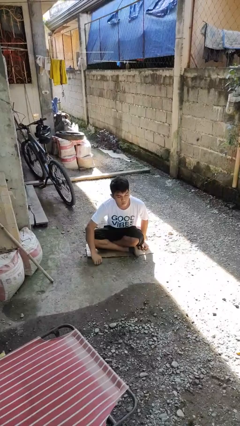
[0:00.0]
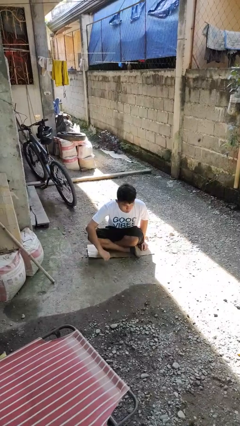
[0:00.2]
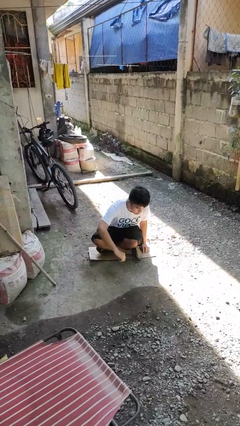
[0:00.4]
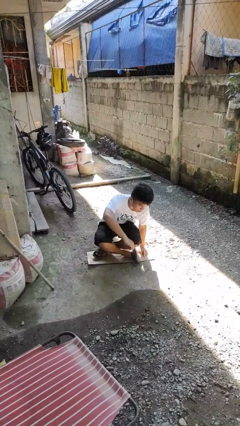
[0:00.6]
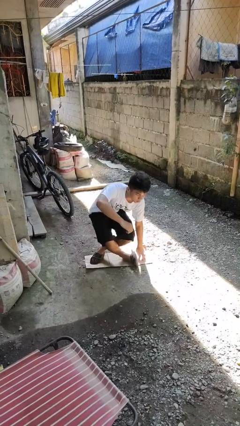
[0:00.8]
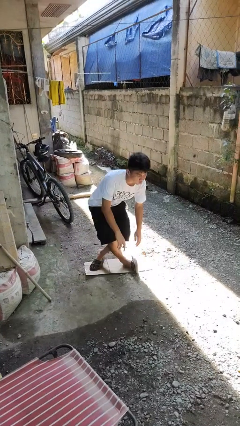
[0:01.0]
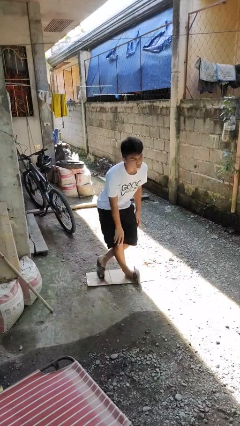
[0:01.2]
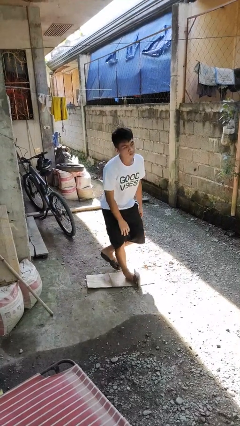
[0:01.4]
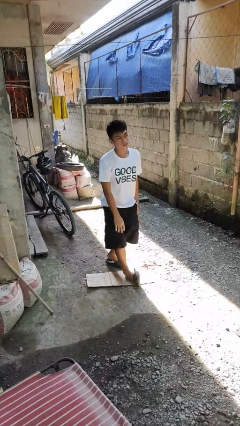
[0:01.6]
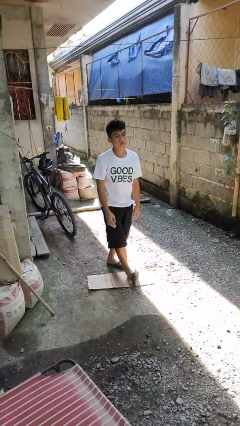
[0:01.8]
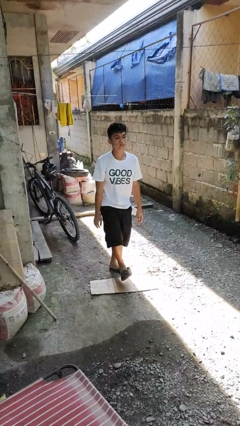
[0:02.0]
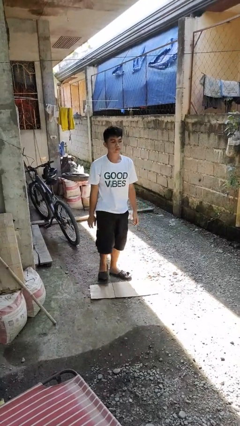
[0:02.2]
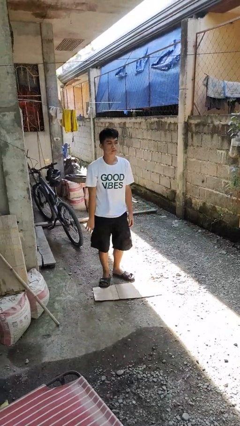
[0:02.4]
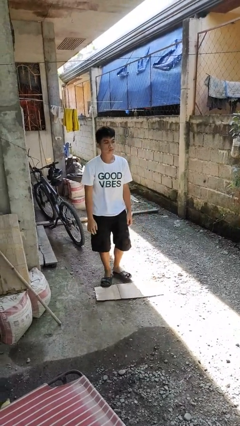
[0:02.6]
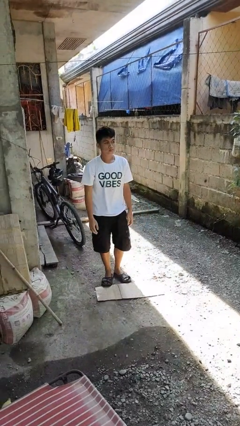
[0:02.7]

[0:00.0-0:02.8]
person stands up from floor

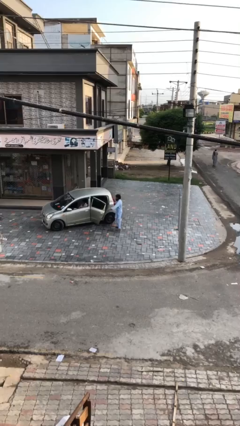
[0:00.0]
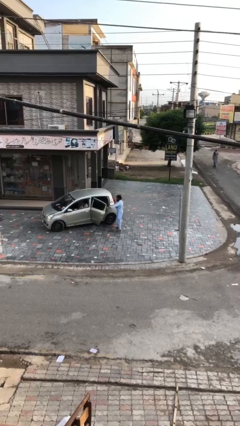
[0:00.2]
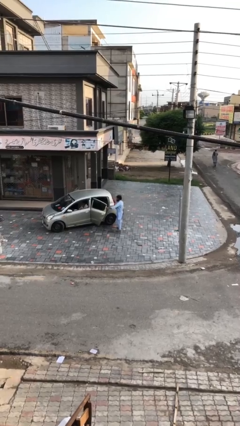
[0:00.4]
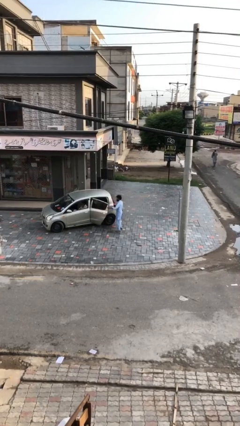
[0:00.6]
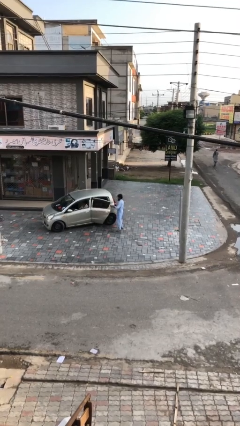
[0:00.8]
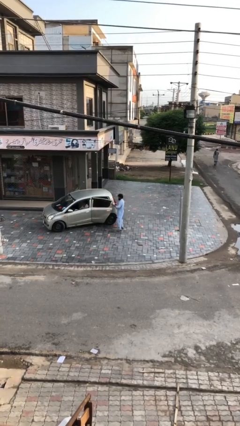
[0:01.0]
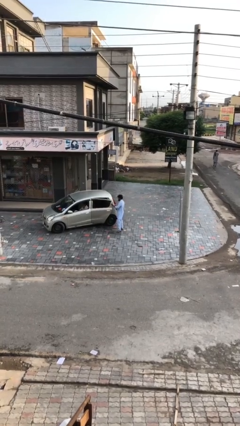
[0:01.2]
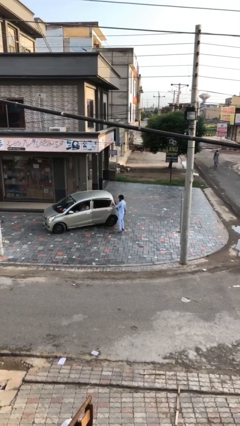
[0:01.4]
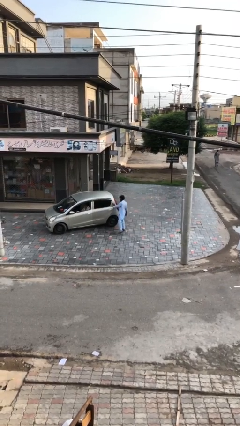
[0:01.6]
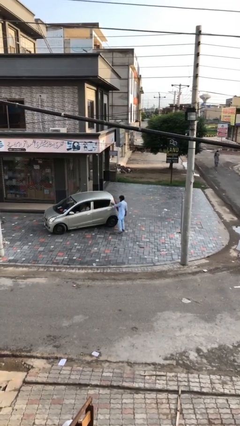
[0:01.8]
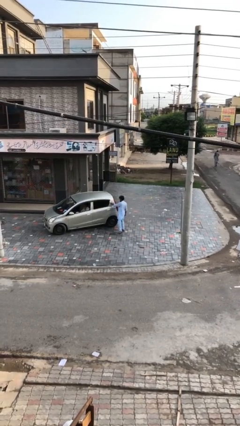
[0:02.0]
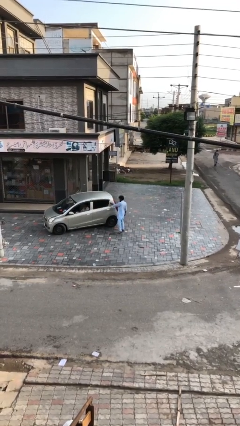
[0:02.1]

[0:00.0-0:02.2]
person closes car door

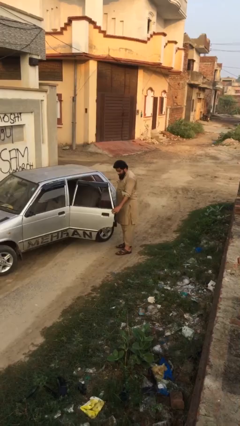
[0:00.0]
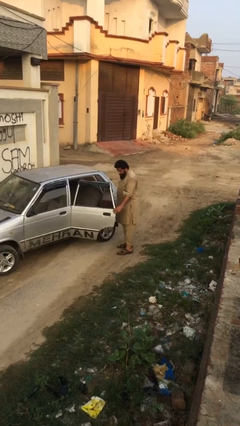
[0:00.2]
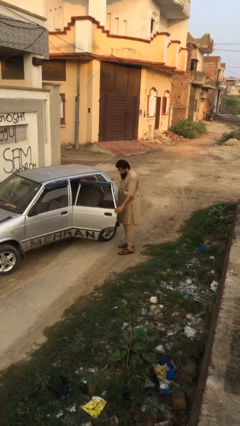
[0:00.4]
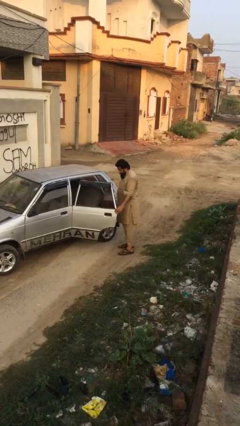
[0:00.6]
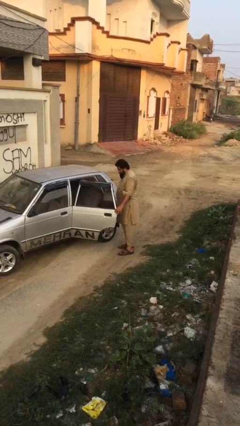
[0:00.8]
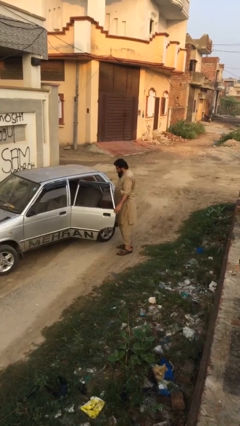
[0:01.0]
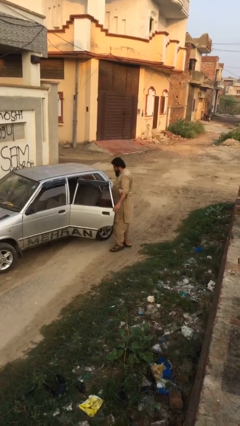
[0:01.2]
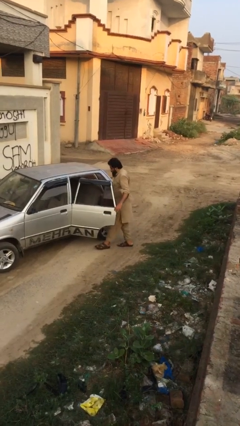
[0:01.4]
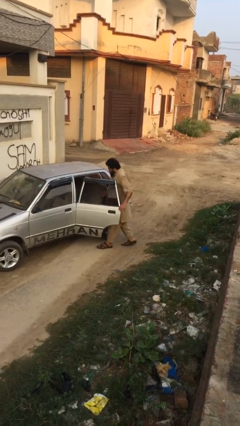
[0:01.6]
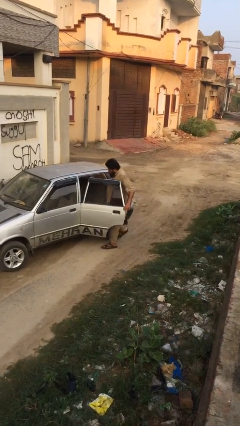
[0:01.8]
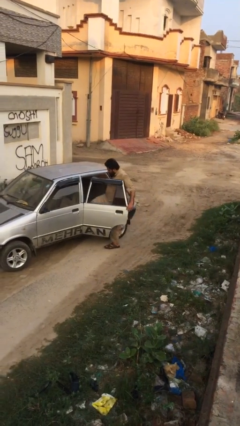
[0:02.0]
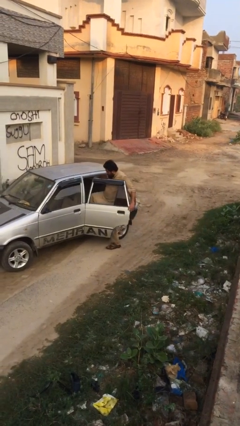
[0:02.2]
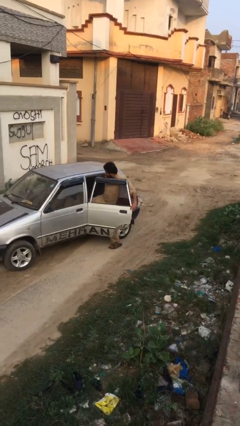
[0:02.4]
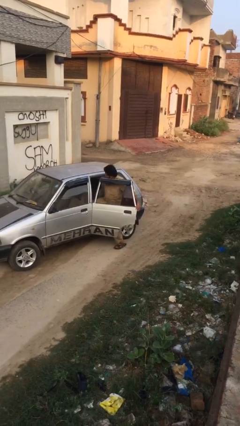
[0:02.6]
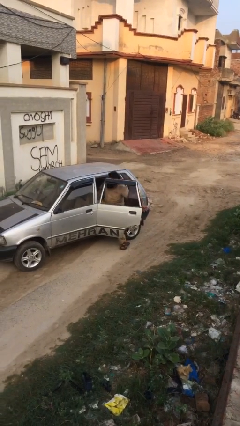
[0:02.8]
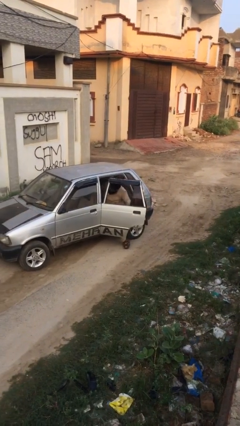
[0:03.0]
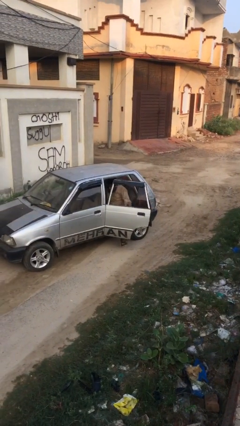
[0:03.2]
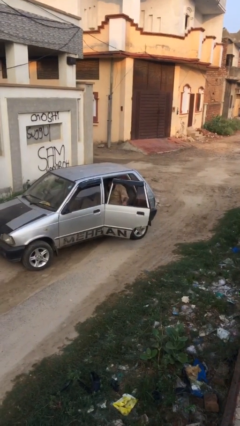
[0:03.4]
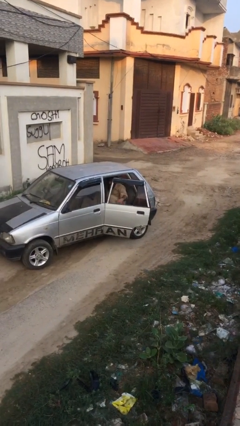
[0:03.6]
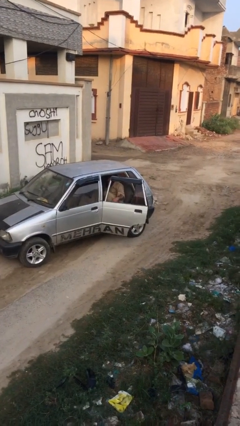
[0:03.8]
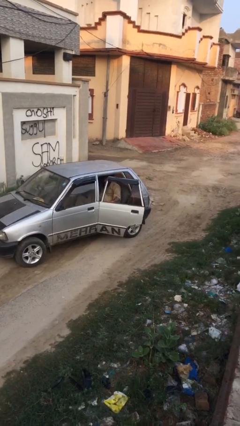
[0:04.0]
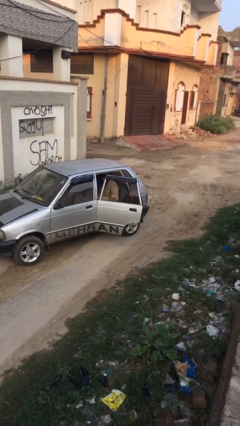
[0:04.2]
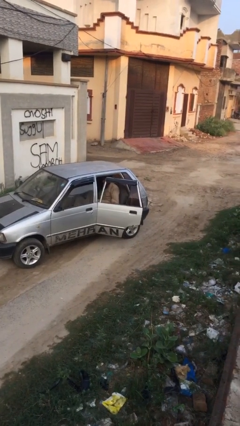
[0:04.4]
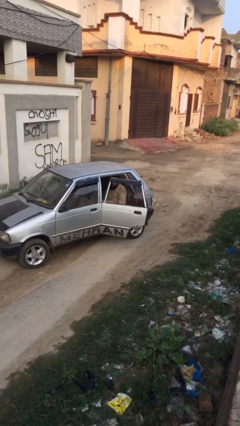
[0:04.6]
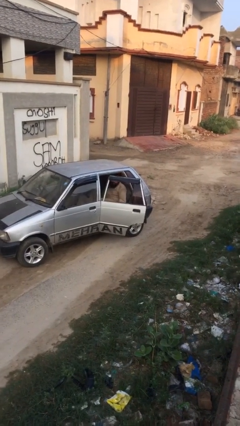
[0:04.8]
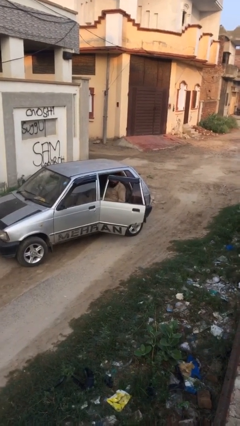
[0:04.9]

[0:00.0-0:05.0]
person enters car

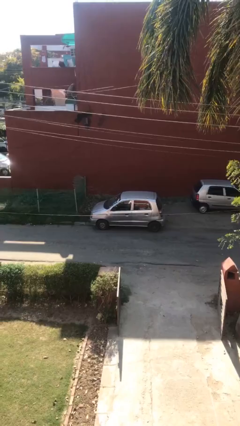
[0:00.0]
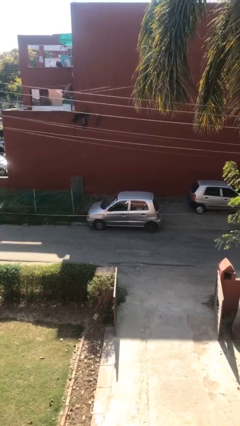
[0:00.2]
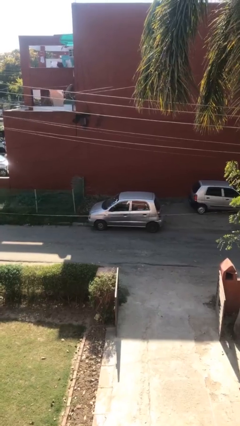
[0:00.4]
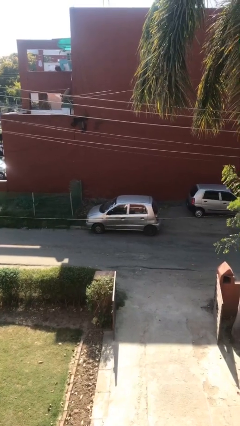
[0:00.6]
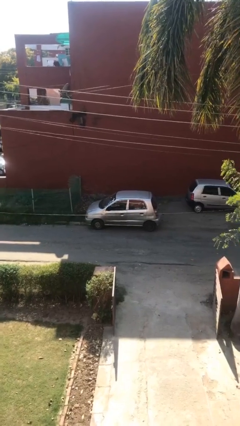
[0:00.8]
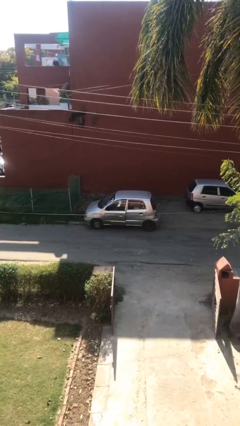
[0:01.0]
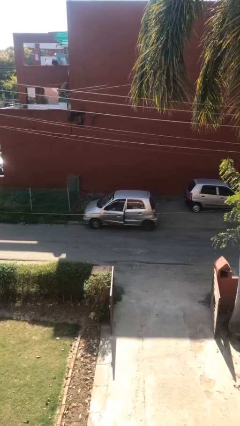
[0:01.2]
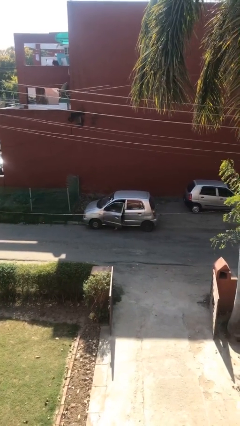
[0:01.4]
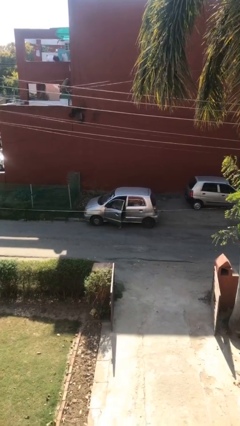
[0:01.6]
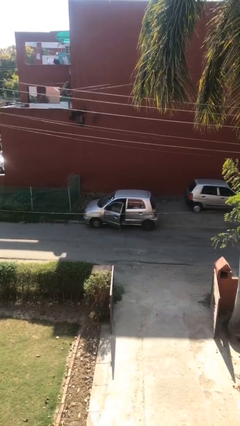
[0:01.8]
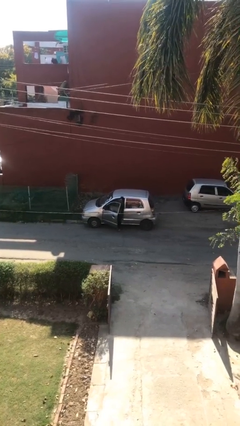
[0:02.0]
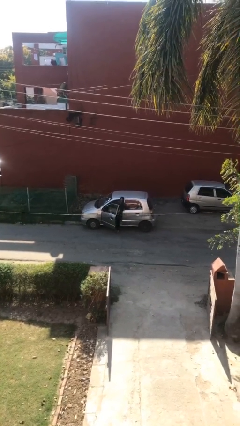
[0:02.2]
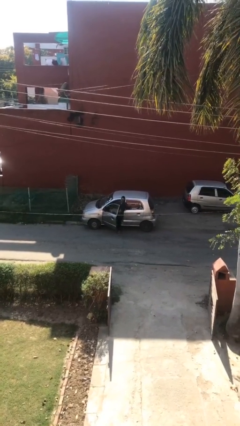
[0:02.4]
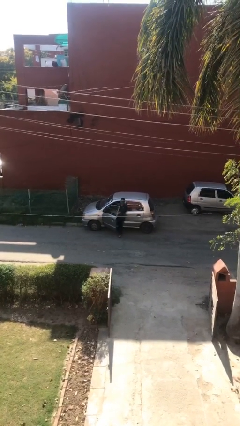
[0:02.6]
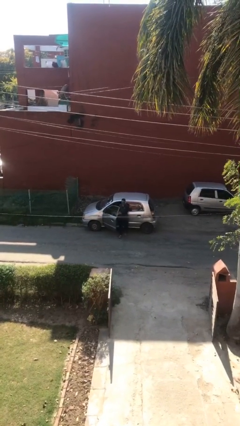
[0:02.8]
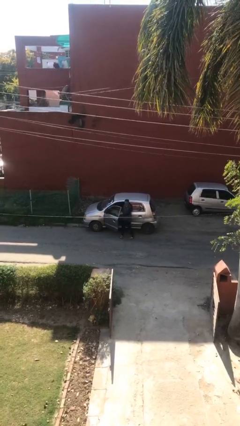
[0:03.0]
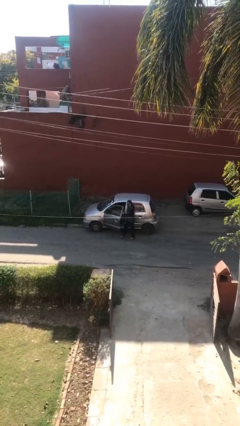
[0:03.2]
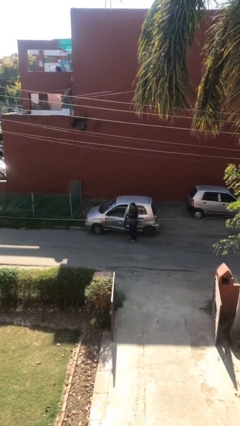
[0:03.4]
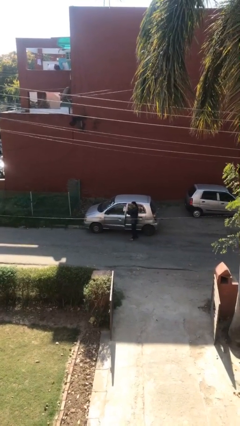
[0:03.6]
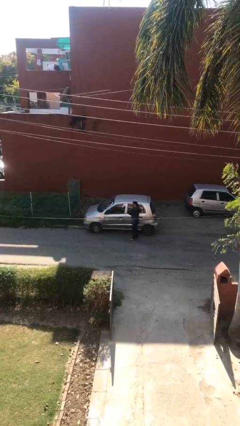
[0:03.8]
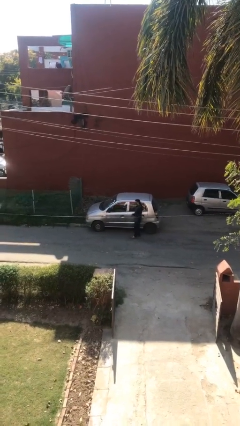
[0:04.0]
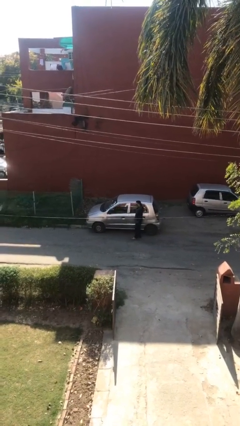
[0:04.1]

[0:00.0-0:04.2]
car drops off person

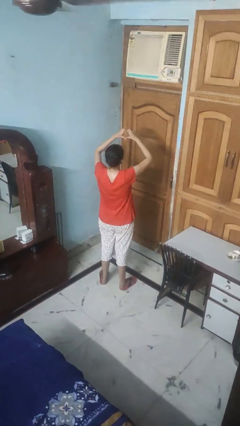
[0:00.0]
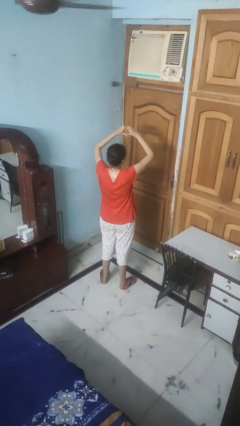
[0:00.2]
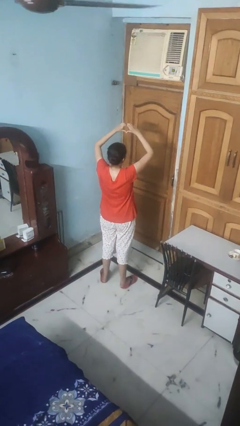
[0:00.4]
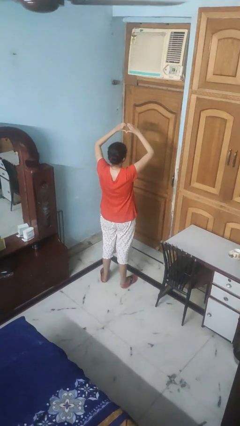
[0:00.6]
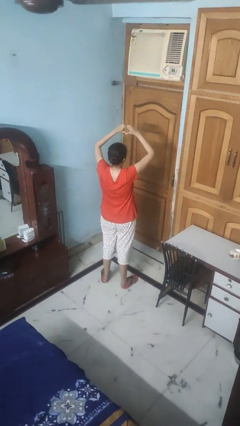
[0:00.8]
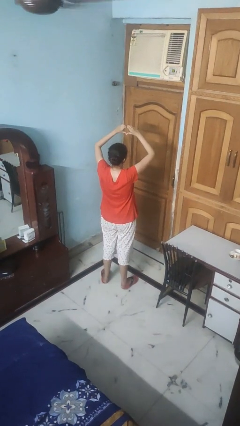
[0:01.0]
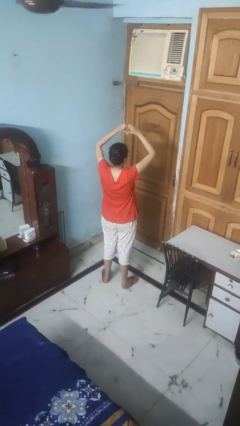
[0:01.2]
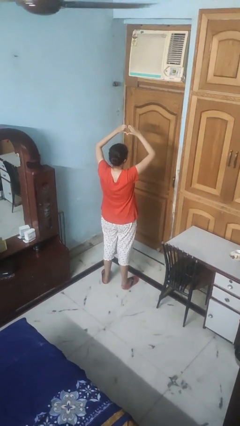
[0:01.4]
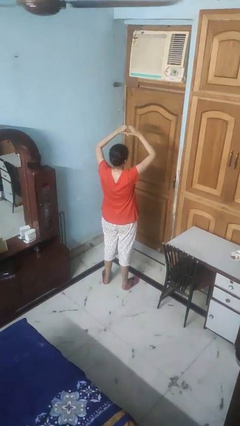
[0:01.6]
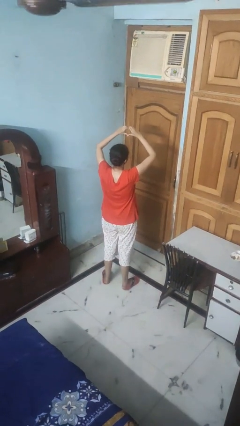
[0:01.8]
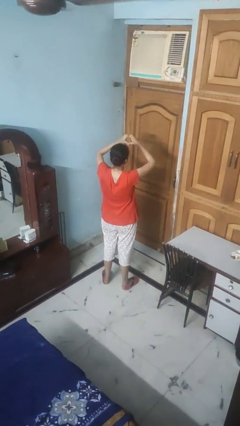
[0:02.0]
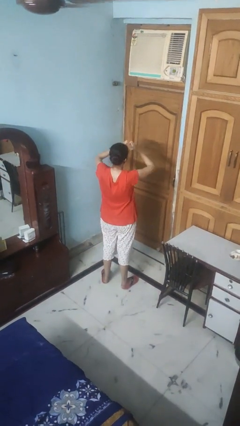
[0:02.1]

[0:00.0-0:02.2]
person gestures heart

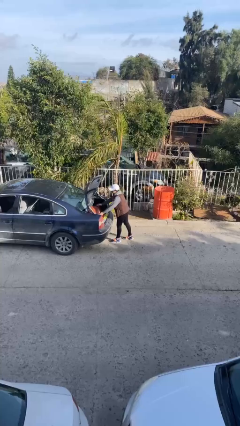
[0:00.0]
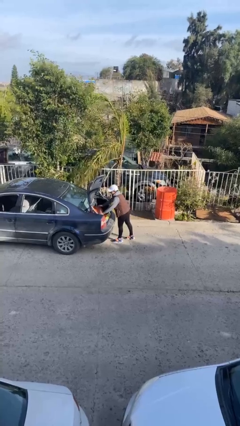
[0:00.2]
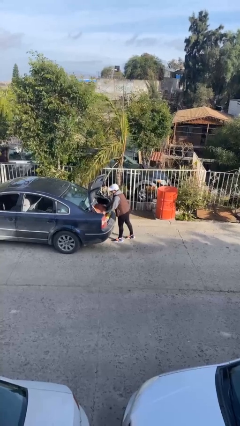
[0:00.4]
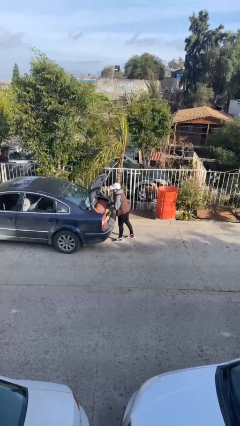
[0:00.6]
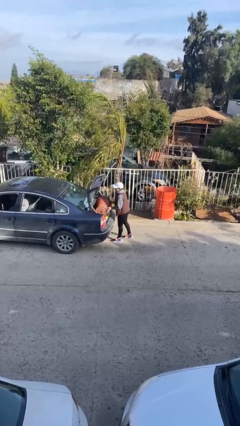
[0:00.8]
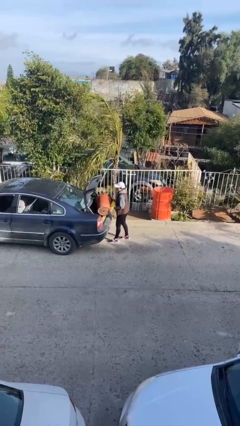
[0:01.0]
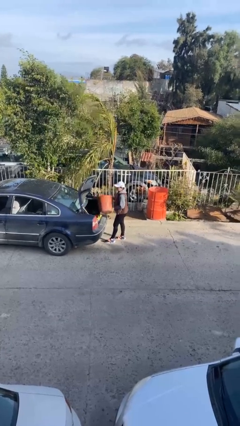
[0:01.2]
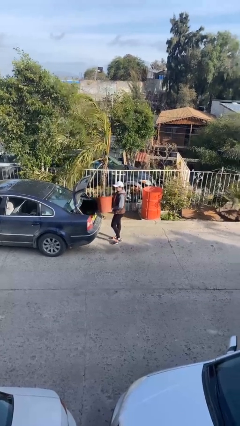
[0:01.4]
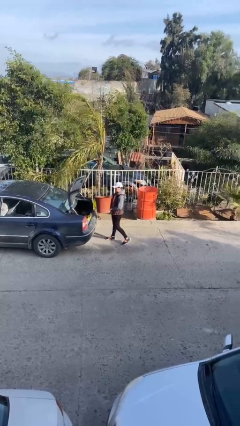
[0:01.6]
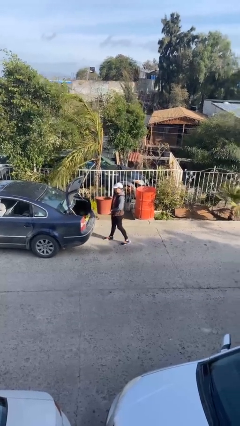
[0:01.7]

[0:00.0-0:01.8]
person unloads car
